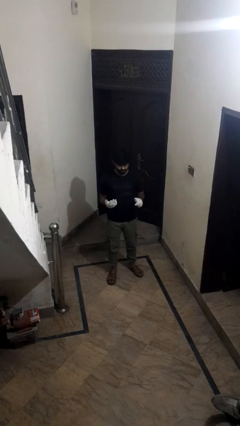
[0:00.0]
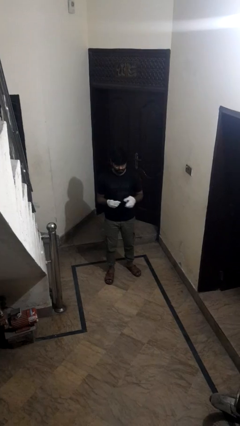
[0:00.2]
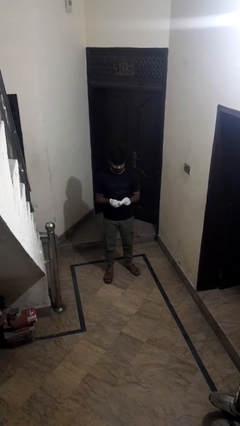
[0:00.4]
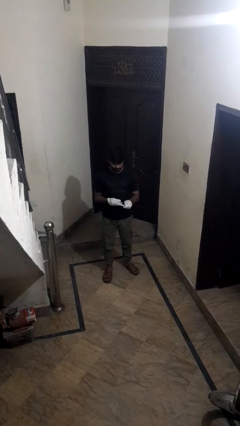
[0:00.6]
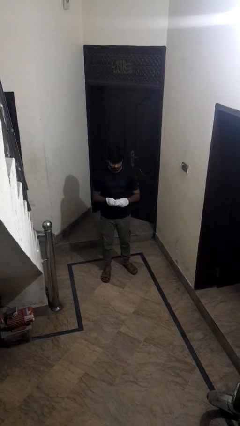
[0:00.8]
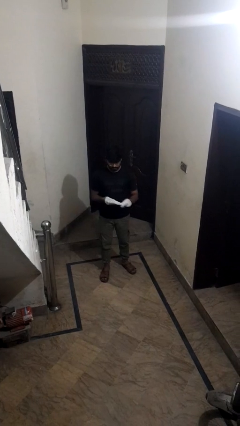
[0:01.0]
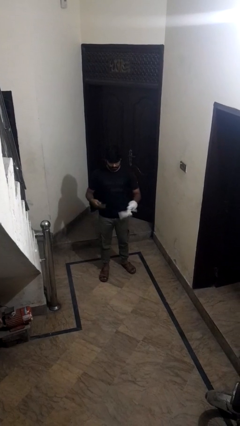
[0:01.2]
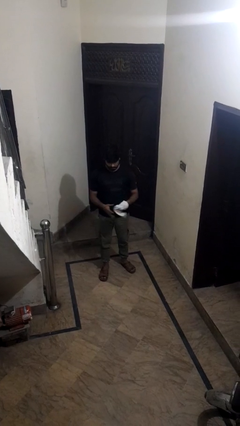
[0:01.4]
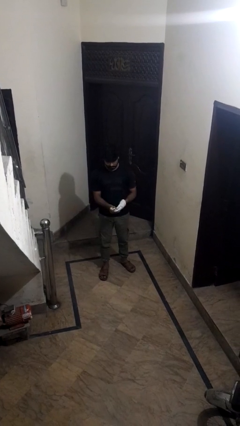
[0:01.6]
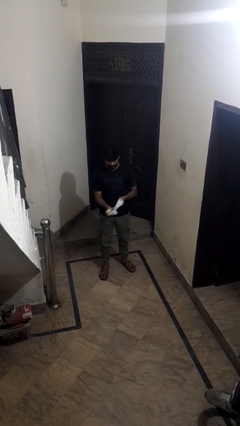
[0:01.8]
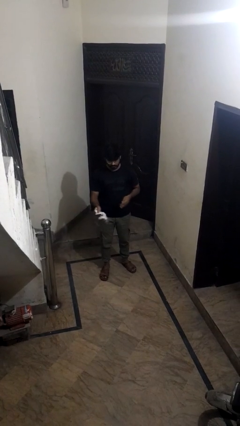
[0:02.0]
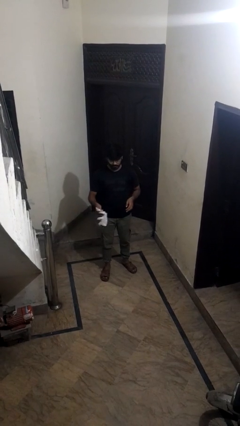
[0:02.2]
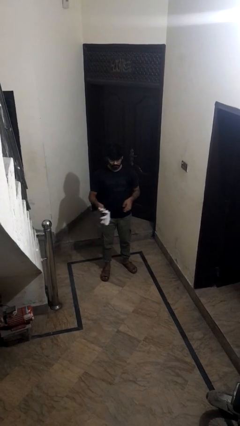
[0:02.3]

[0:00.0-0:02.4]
person takes off gloves

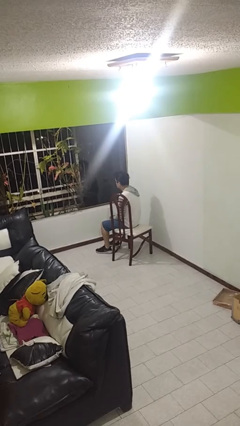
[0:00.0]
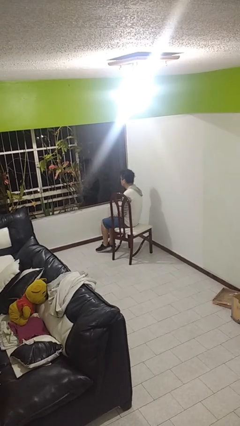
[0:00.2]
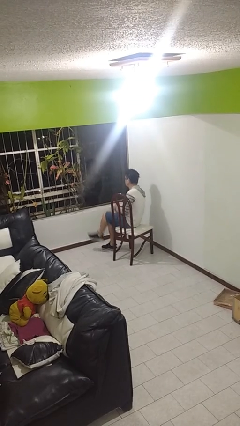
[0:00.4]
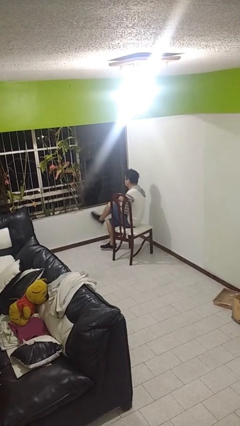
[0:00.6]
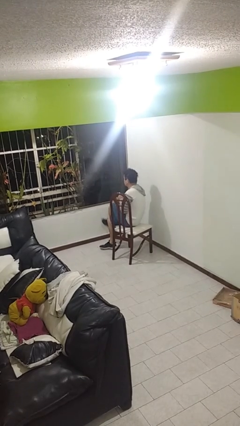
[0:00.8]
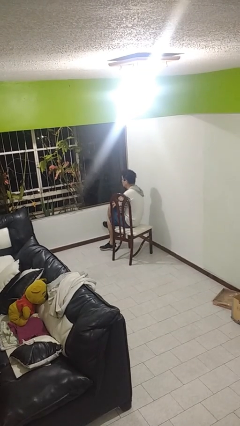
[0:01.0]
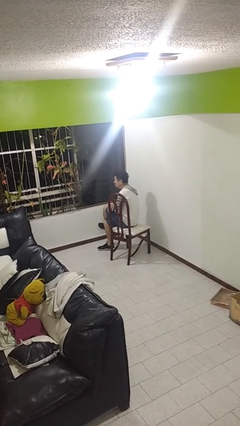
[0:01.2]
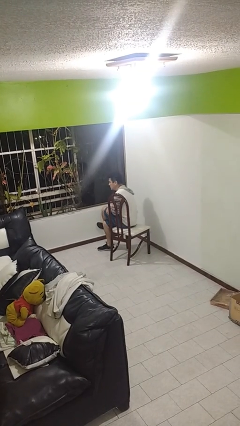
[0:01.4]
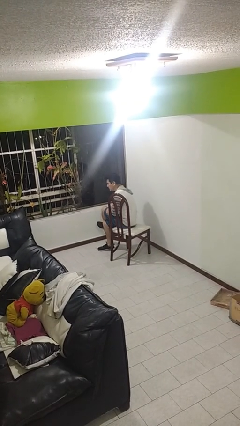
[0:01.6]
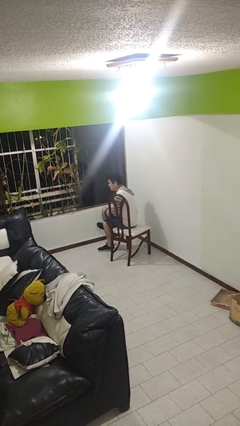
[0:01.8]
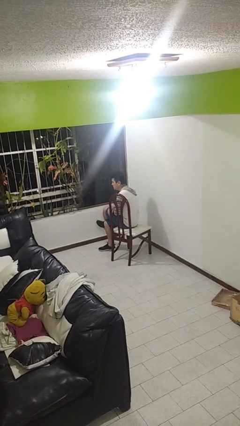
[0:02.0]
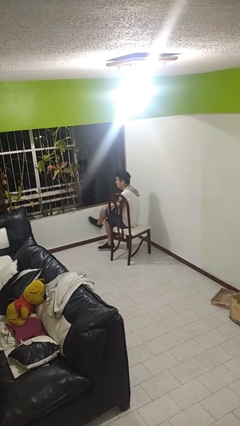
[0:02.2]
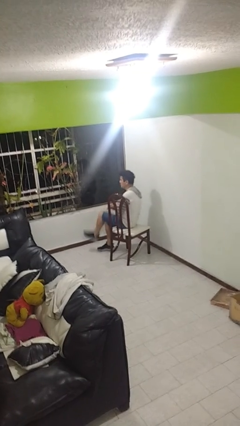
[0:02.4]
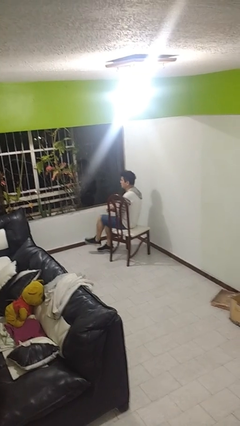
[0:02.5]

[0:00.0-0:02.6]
person crosses legs

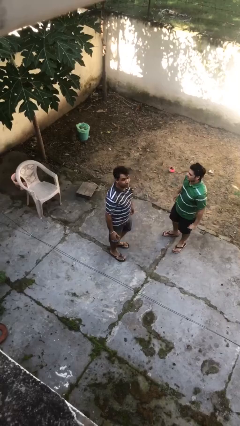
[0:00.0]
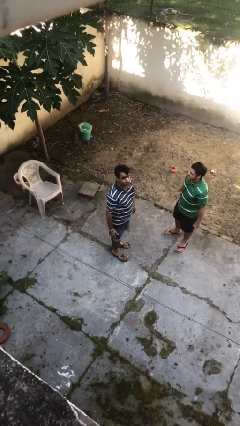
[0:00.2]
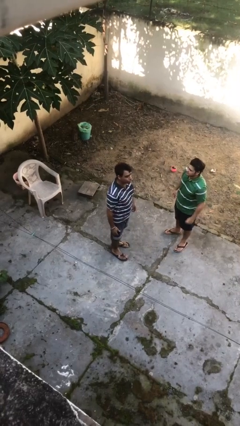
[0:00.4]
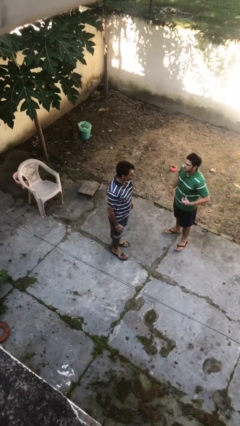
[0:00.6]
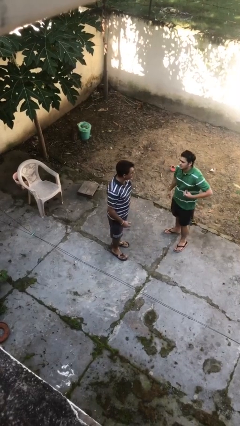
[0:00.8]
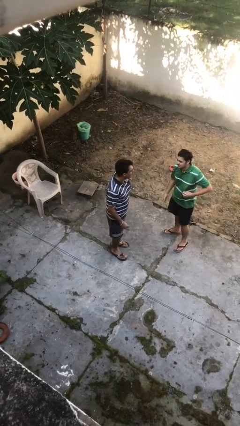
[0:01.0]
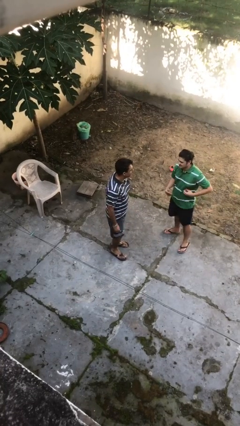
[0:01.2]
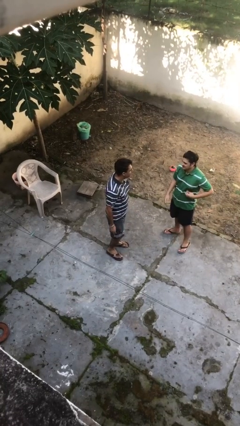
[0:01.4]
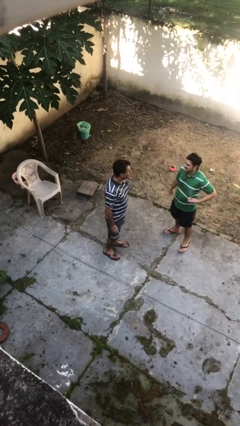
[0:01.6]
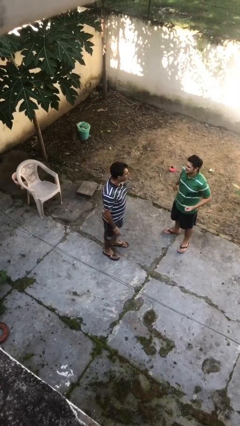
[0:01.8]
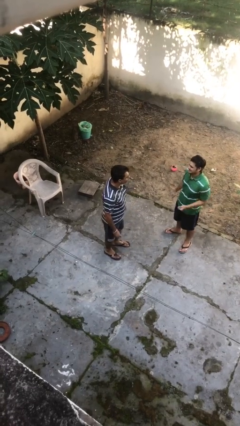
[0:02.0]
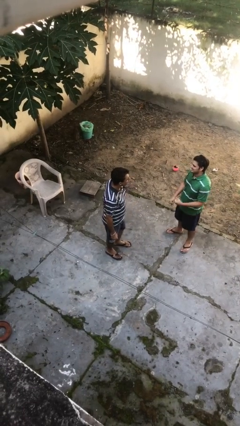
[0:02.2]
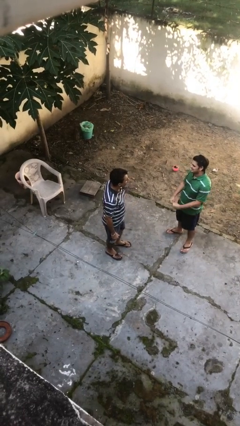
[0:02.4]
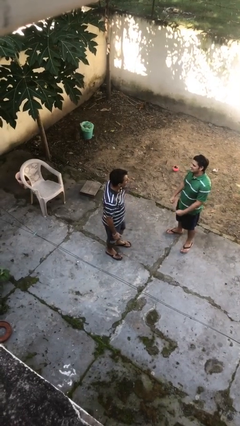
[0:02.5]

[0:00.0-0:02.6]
person talks to person

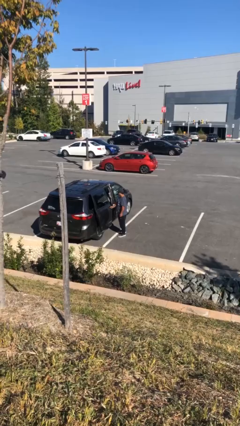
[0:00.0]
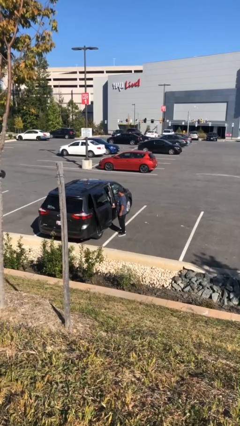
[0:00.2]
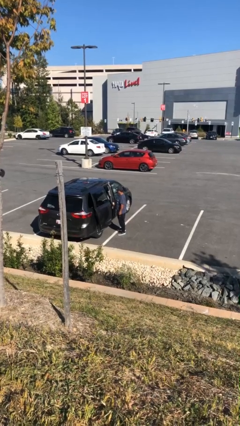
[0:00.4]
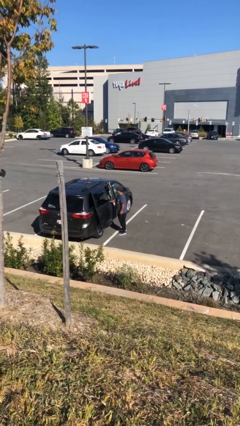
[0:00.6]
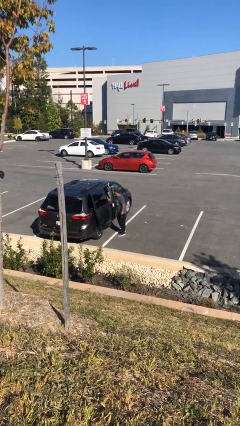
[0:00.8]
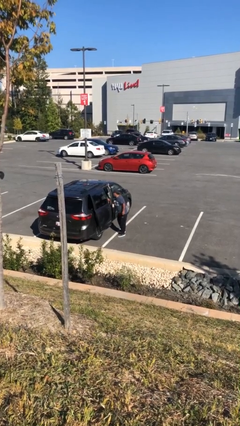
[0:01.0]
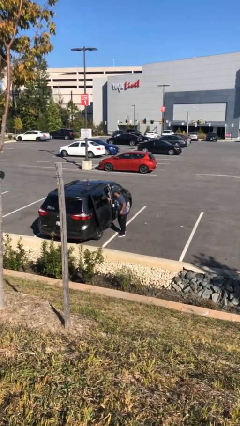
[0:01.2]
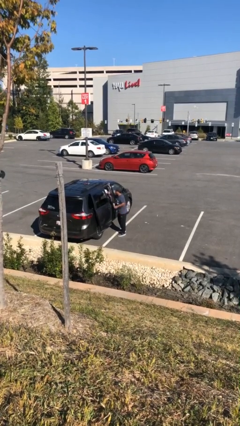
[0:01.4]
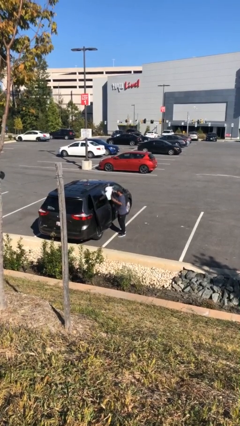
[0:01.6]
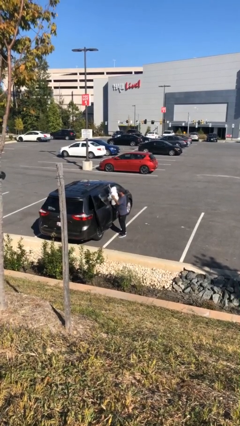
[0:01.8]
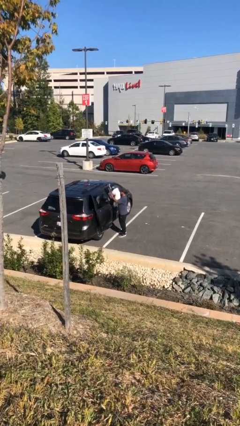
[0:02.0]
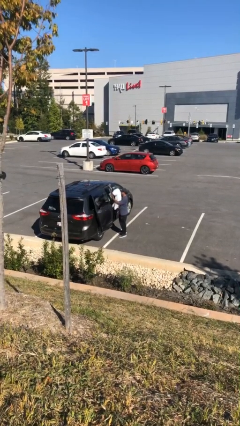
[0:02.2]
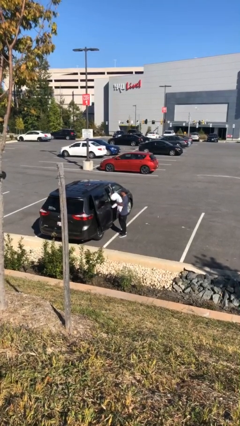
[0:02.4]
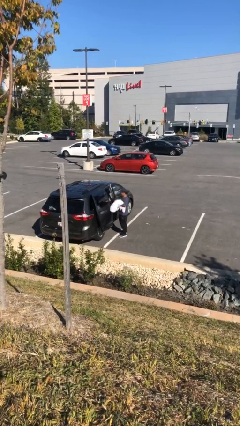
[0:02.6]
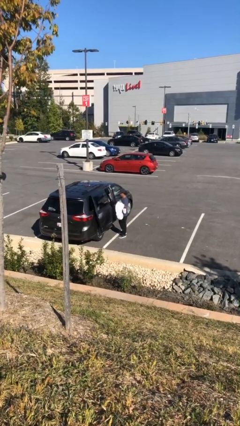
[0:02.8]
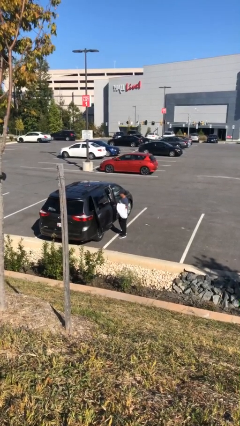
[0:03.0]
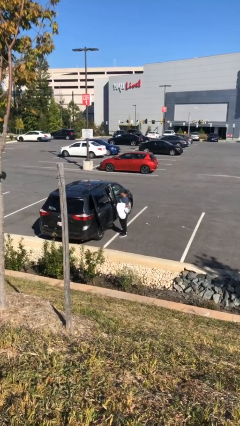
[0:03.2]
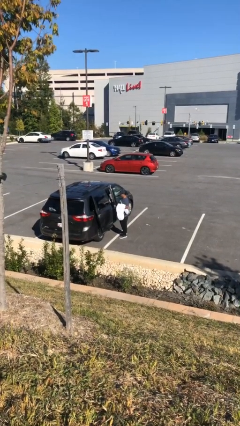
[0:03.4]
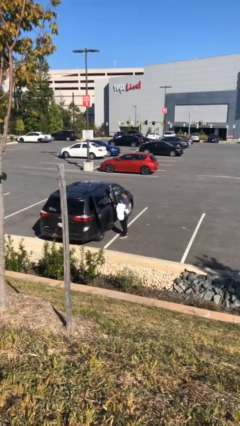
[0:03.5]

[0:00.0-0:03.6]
person unloads car

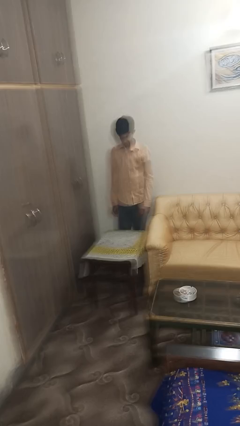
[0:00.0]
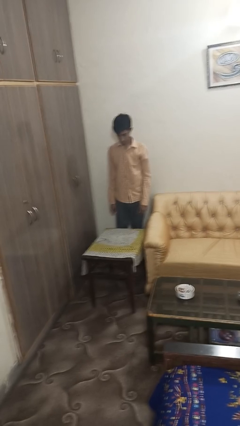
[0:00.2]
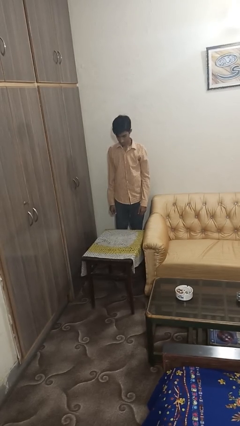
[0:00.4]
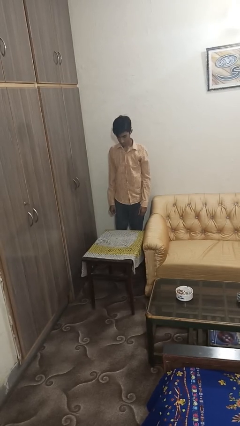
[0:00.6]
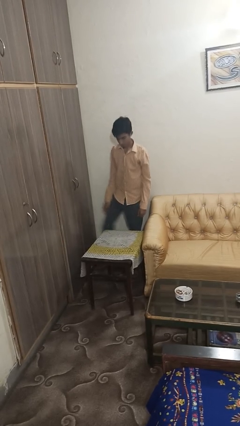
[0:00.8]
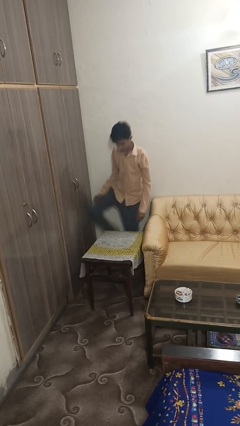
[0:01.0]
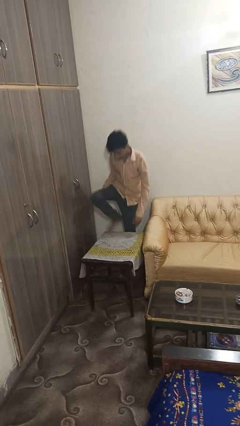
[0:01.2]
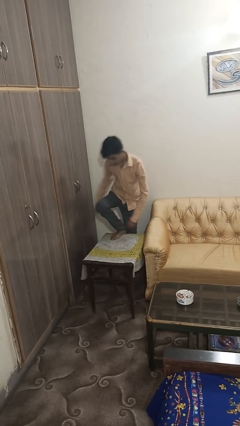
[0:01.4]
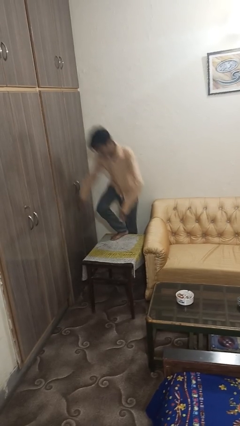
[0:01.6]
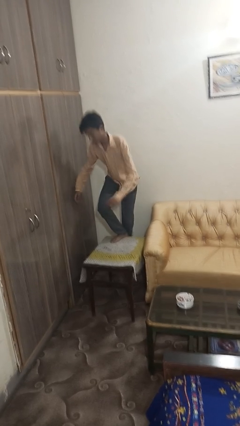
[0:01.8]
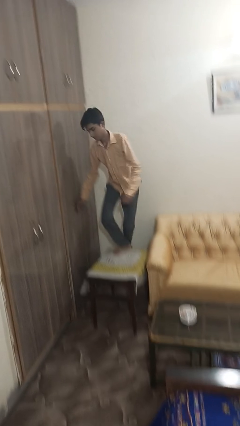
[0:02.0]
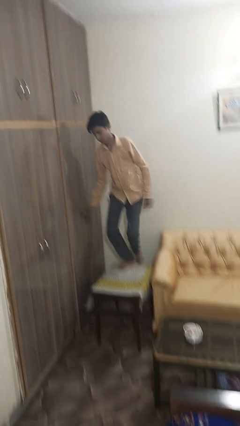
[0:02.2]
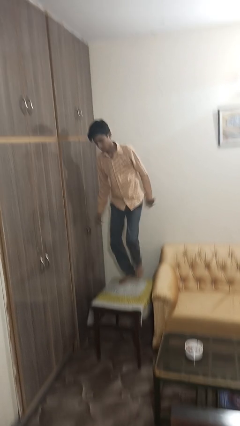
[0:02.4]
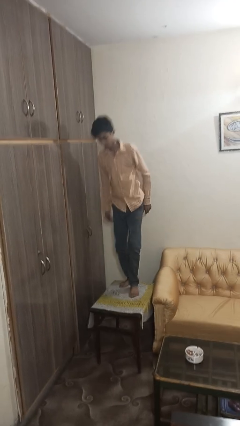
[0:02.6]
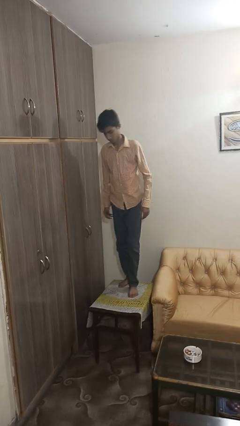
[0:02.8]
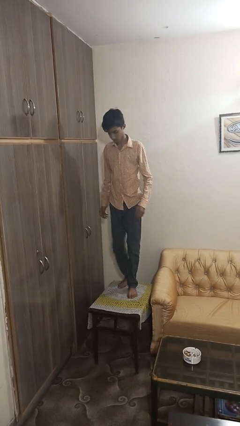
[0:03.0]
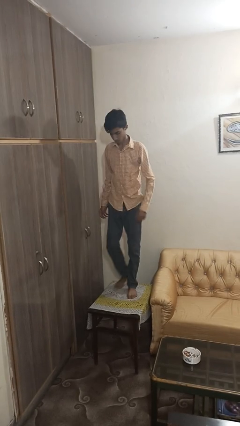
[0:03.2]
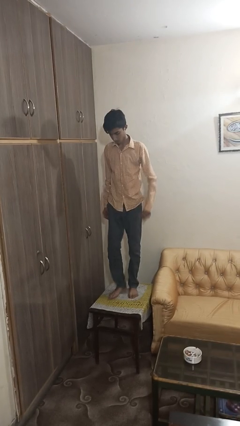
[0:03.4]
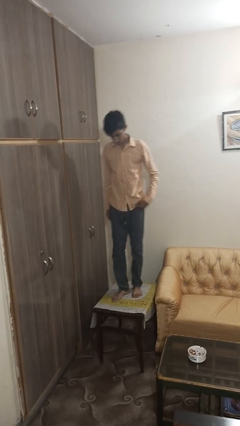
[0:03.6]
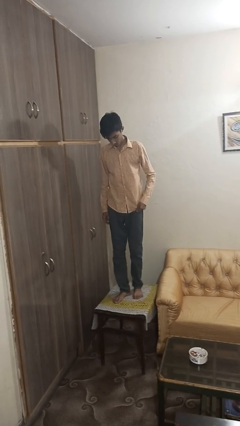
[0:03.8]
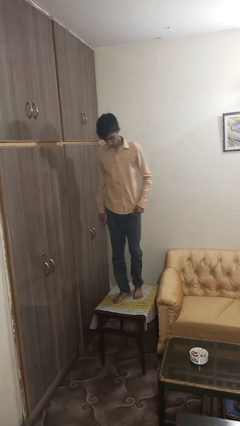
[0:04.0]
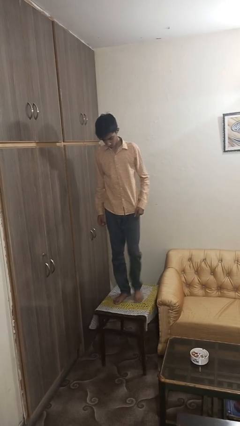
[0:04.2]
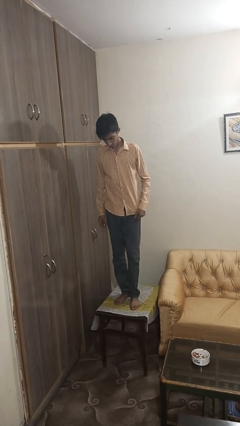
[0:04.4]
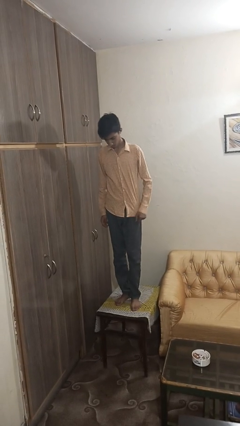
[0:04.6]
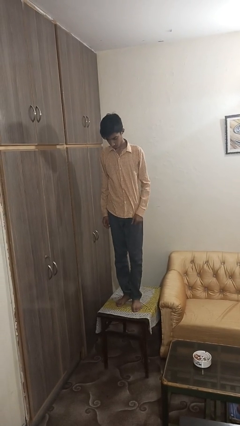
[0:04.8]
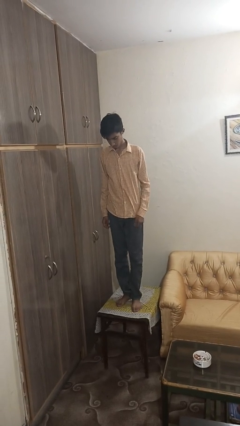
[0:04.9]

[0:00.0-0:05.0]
person climbs on table

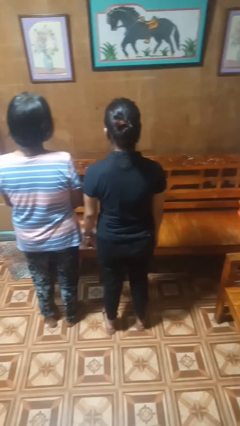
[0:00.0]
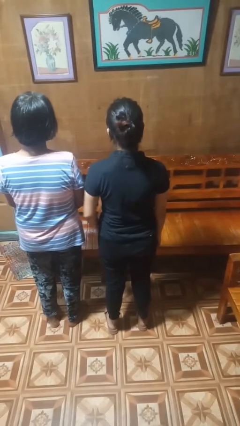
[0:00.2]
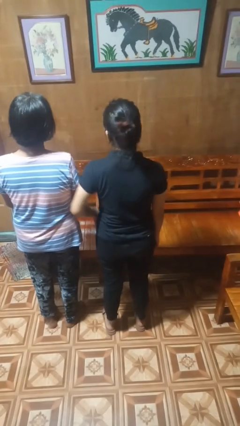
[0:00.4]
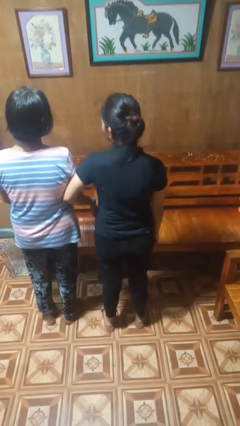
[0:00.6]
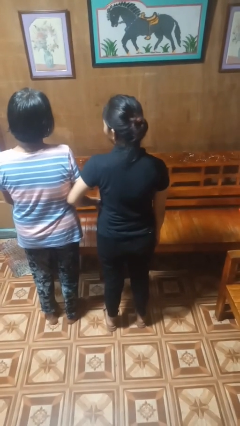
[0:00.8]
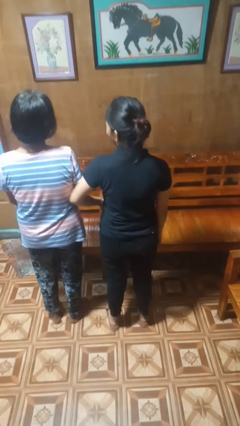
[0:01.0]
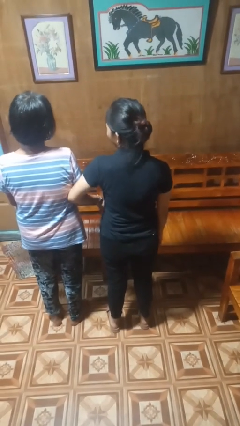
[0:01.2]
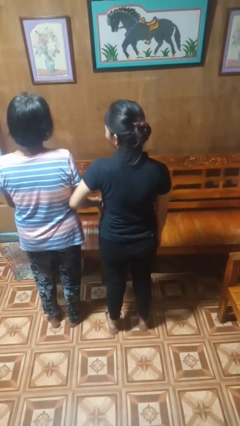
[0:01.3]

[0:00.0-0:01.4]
person nudges person with elbow
